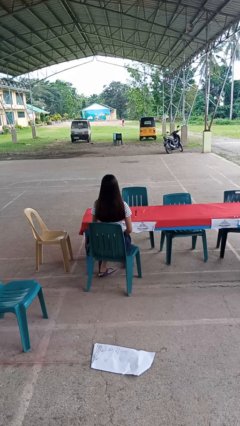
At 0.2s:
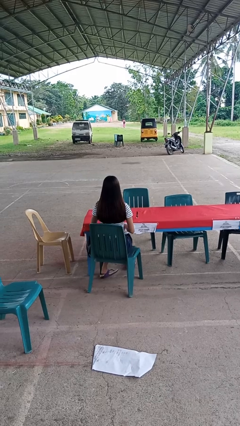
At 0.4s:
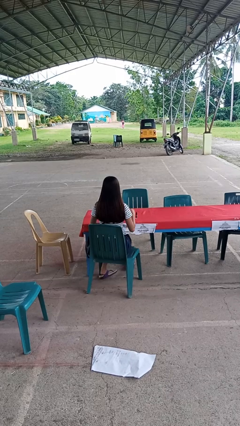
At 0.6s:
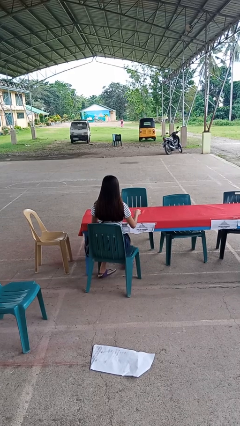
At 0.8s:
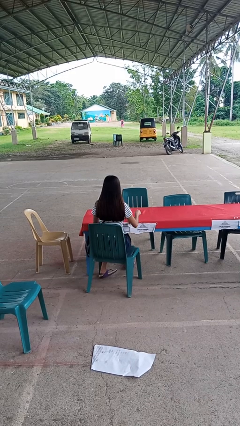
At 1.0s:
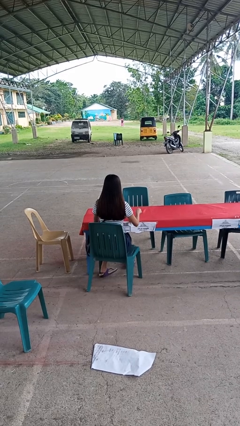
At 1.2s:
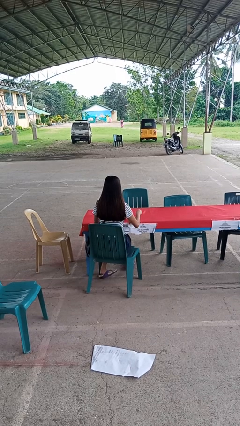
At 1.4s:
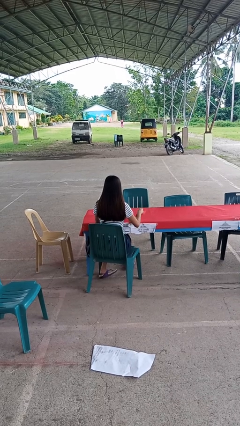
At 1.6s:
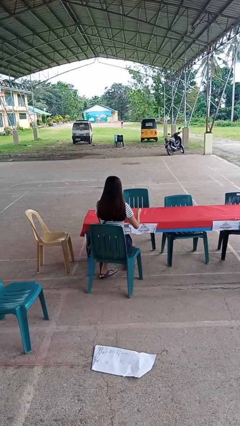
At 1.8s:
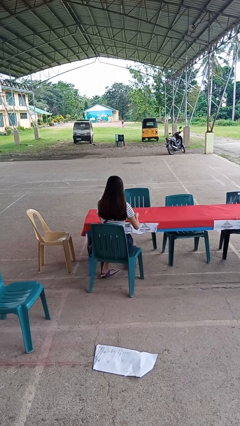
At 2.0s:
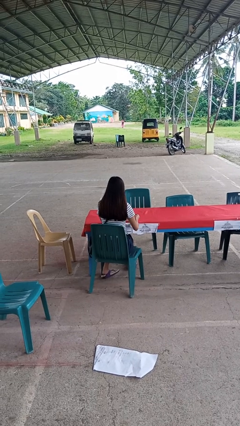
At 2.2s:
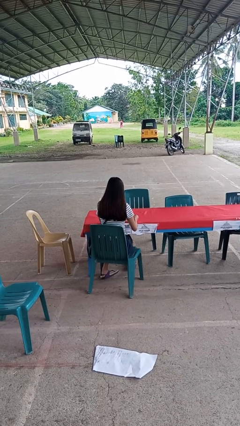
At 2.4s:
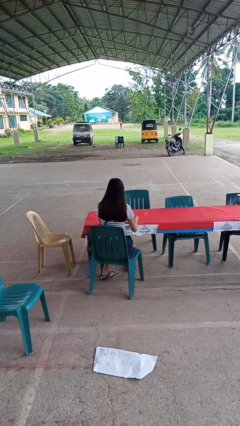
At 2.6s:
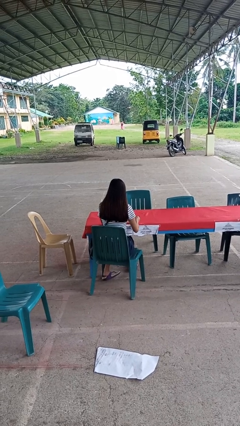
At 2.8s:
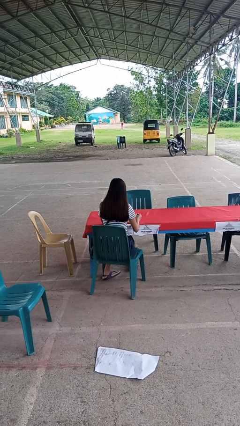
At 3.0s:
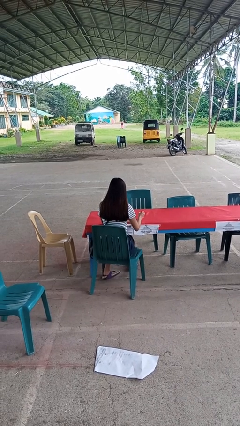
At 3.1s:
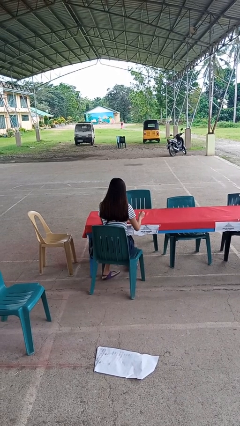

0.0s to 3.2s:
person paints fingernails

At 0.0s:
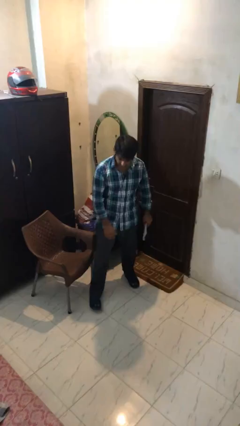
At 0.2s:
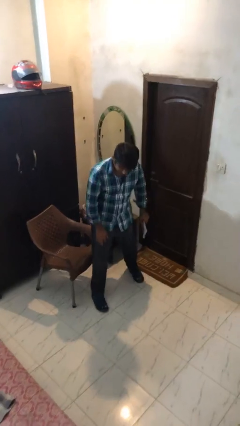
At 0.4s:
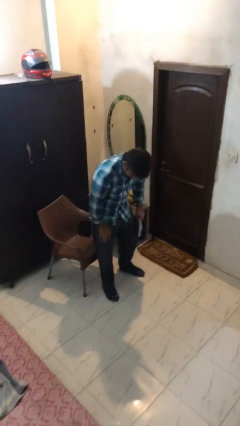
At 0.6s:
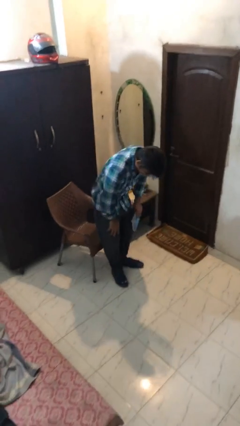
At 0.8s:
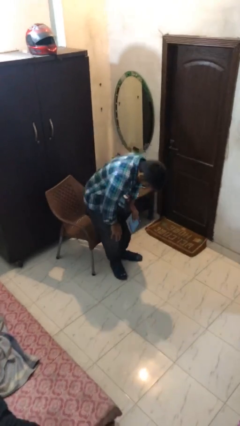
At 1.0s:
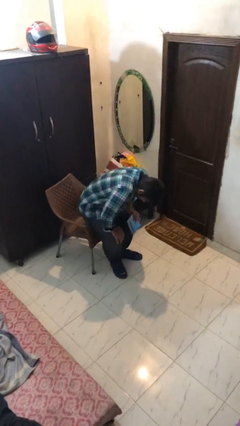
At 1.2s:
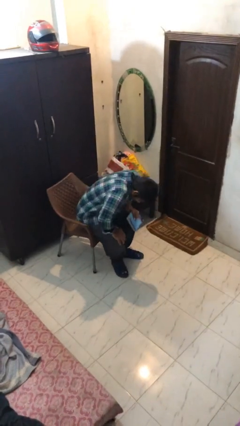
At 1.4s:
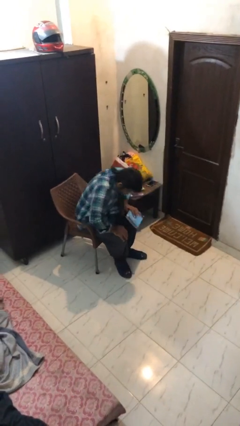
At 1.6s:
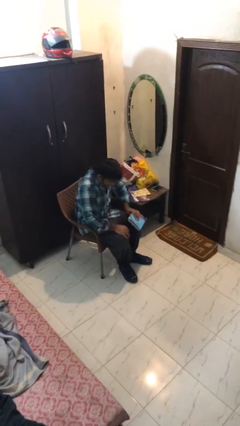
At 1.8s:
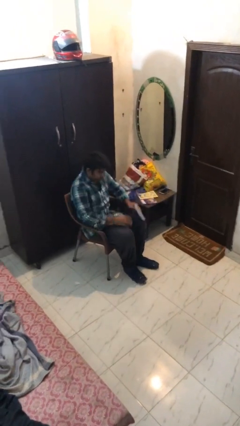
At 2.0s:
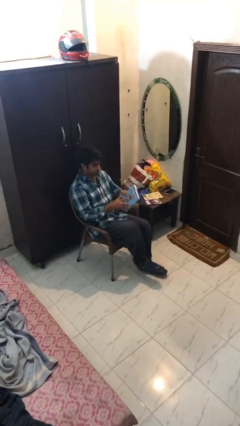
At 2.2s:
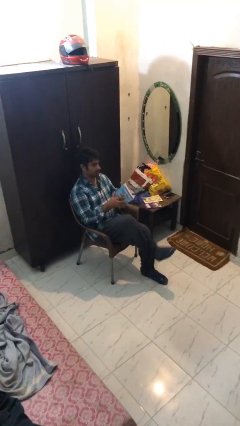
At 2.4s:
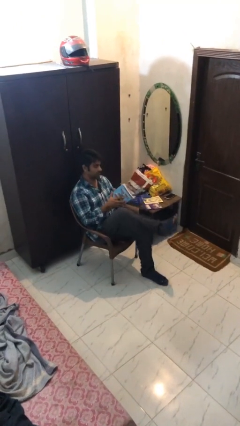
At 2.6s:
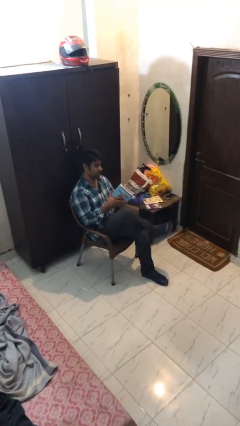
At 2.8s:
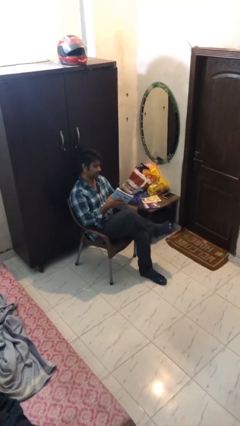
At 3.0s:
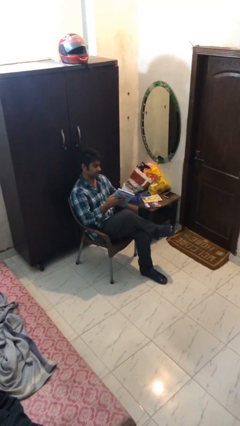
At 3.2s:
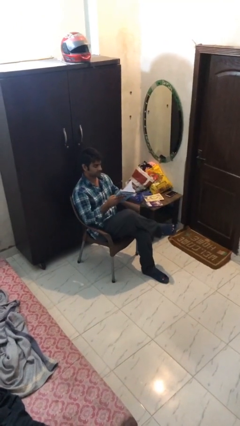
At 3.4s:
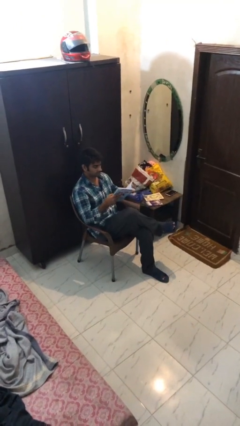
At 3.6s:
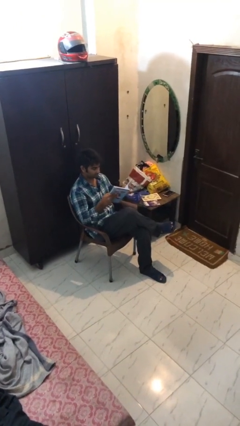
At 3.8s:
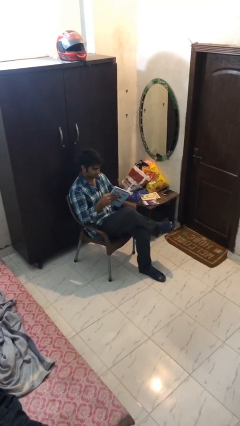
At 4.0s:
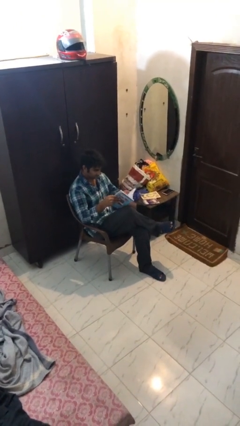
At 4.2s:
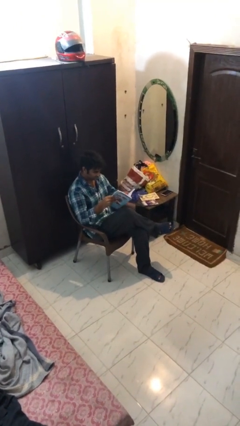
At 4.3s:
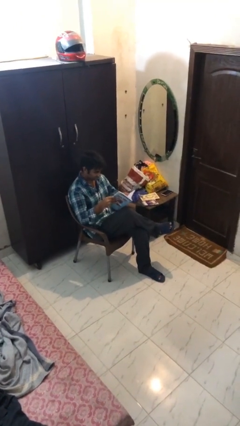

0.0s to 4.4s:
person sits down

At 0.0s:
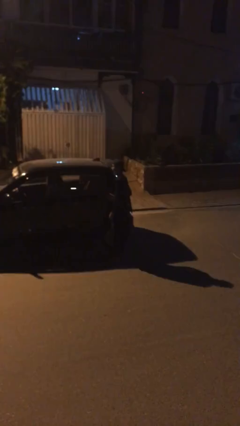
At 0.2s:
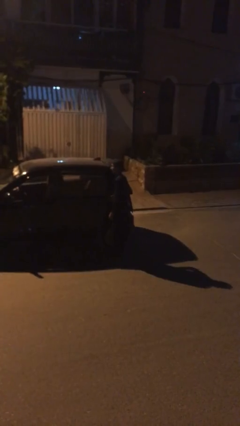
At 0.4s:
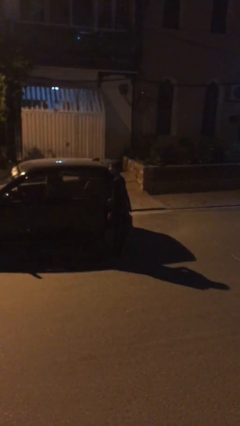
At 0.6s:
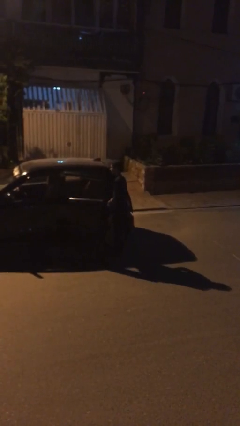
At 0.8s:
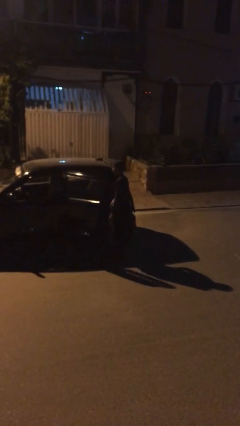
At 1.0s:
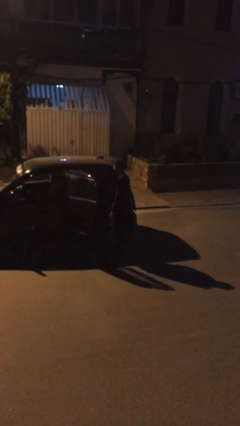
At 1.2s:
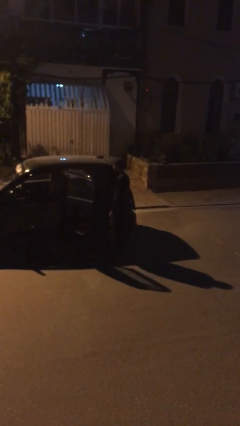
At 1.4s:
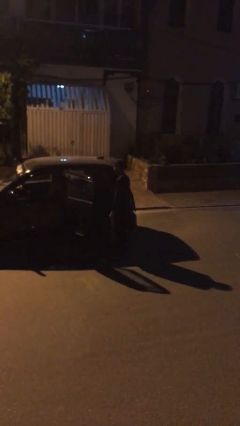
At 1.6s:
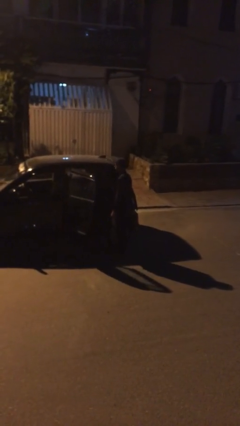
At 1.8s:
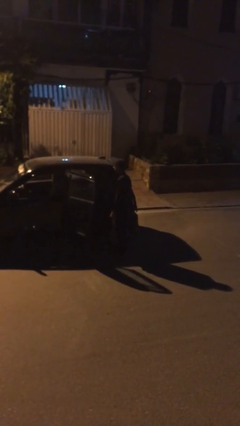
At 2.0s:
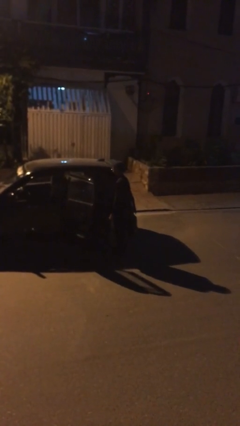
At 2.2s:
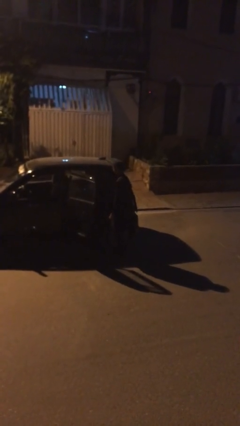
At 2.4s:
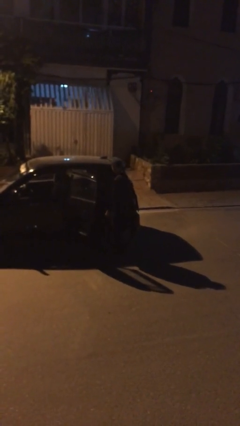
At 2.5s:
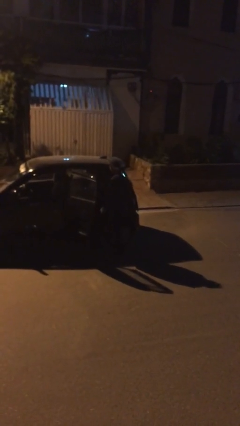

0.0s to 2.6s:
person opens car door

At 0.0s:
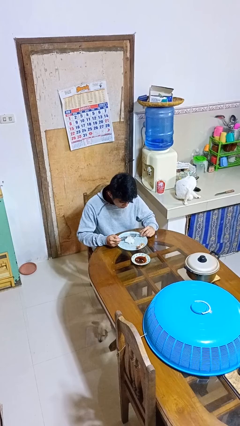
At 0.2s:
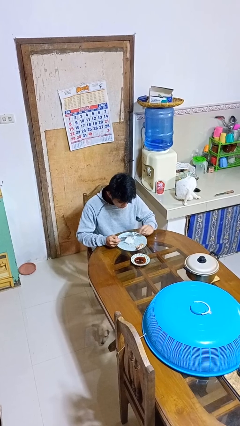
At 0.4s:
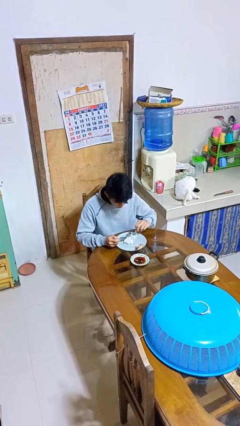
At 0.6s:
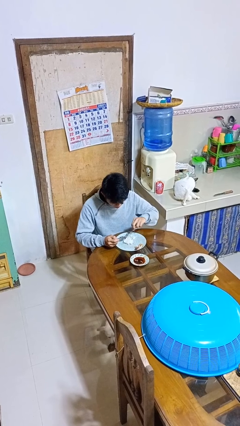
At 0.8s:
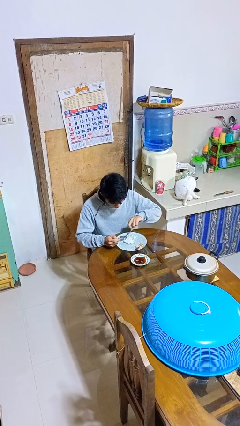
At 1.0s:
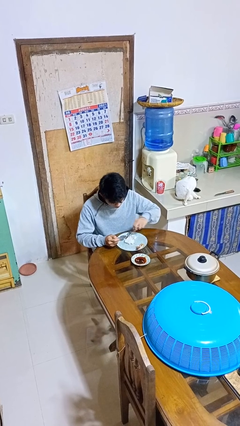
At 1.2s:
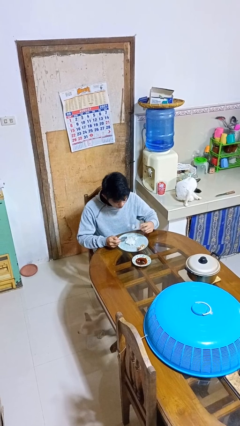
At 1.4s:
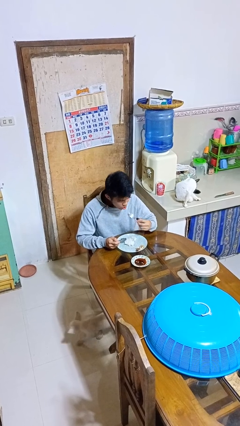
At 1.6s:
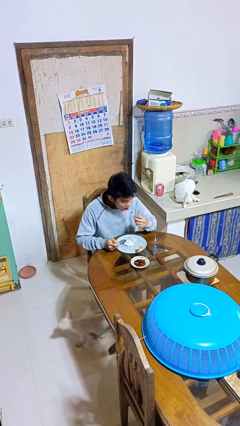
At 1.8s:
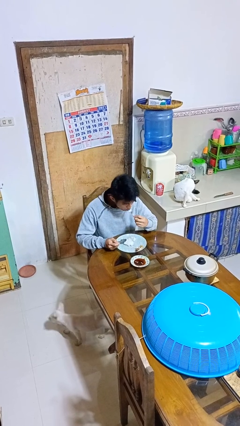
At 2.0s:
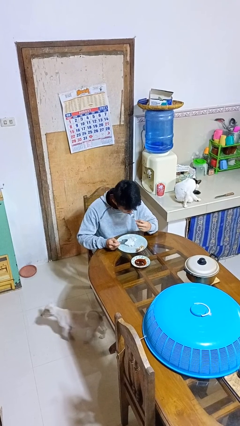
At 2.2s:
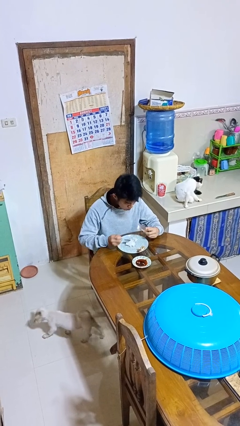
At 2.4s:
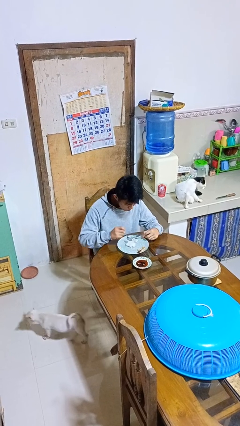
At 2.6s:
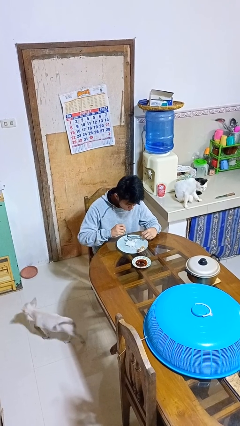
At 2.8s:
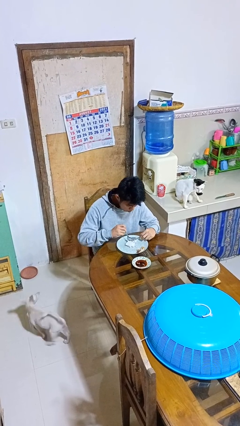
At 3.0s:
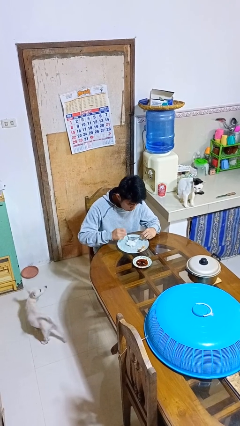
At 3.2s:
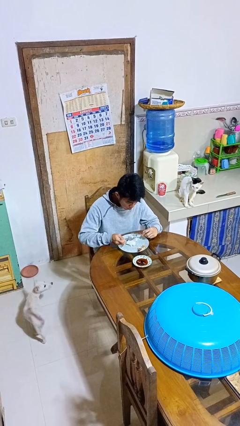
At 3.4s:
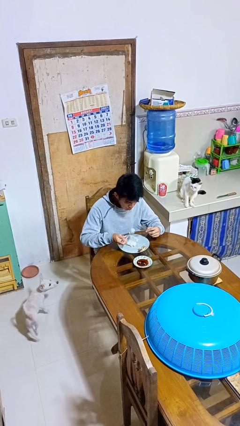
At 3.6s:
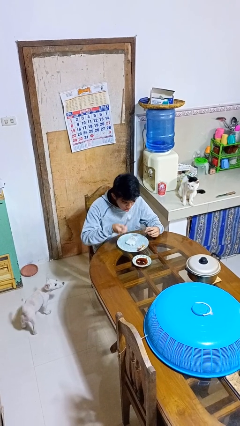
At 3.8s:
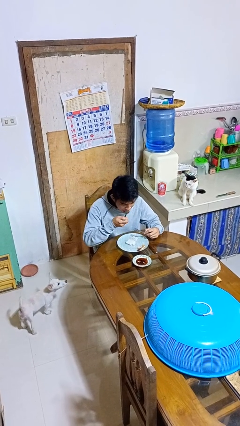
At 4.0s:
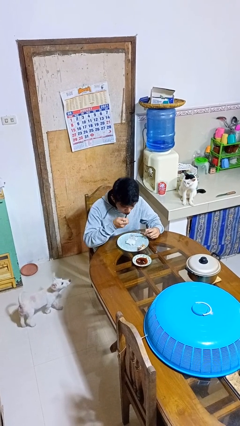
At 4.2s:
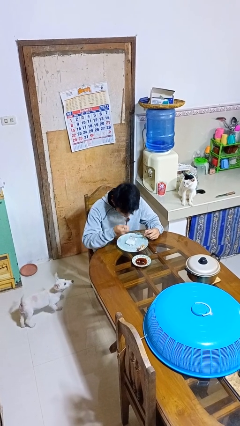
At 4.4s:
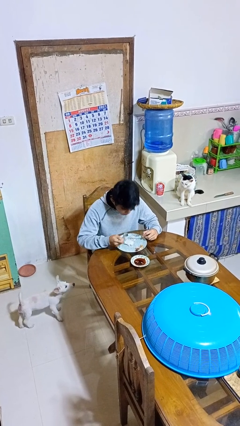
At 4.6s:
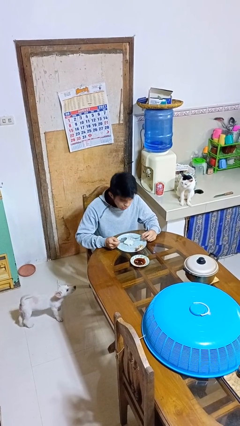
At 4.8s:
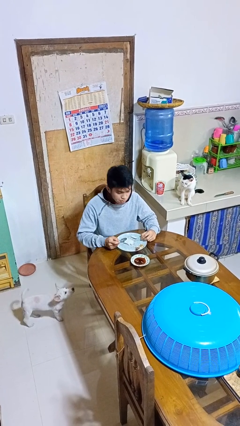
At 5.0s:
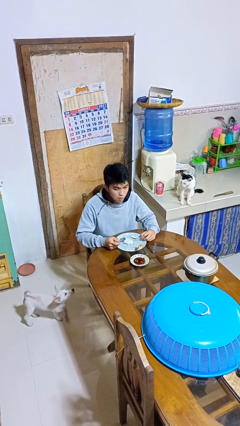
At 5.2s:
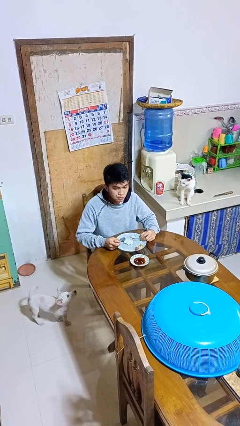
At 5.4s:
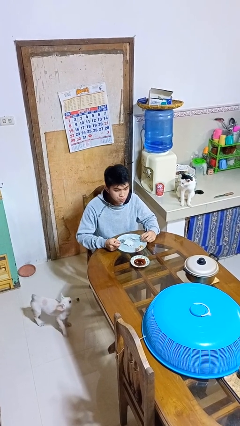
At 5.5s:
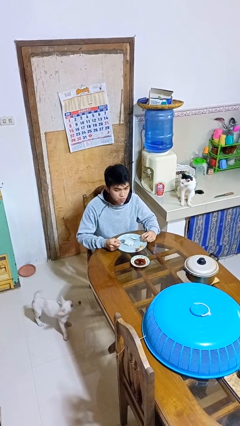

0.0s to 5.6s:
person eats with utensil

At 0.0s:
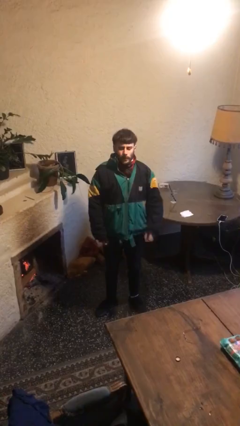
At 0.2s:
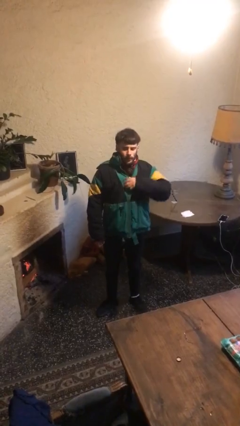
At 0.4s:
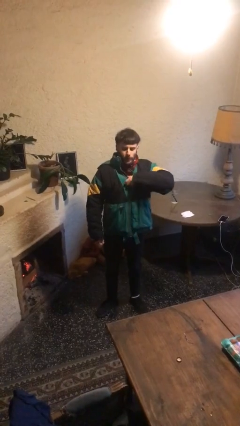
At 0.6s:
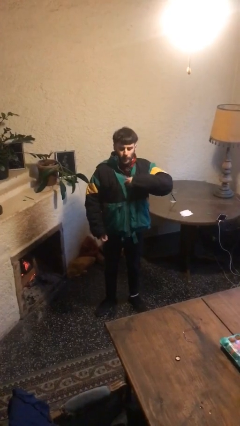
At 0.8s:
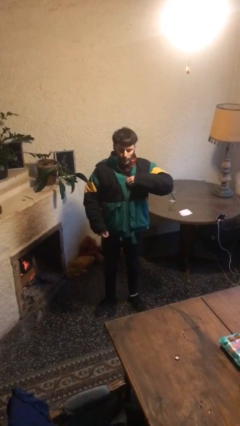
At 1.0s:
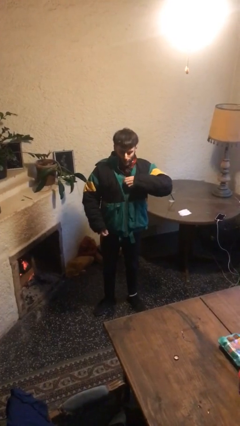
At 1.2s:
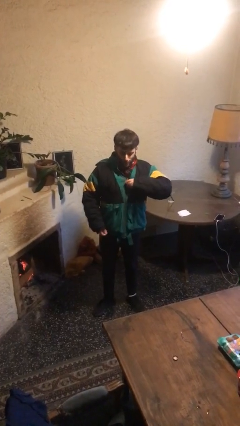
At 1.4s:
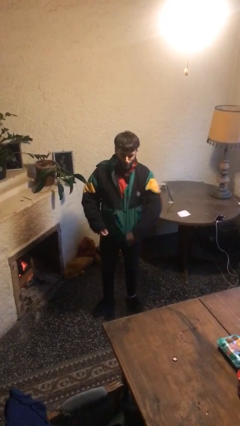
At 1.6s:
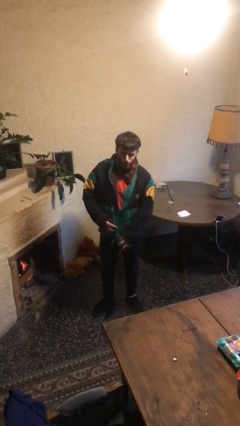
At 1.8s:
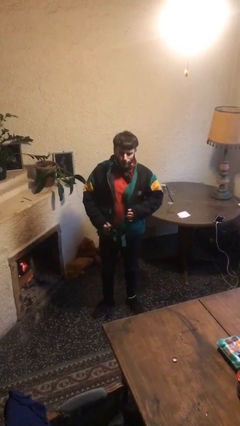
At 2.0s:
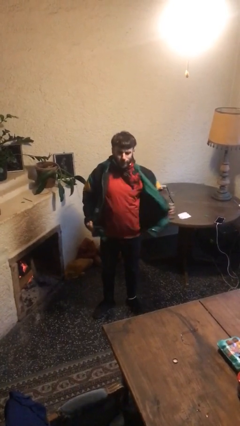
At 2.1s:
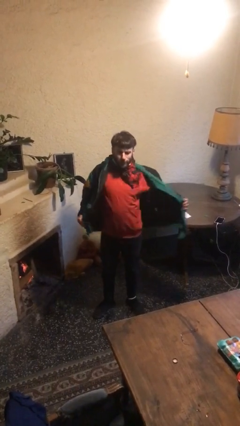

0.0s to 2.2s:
person unzips jacket
